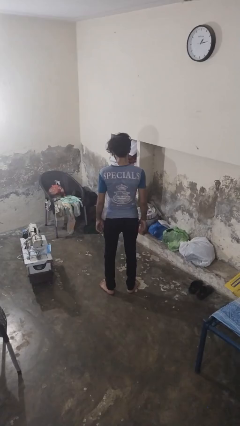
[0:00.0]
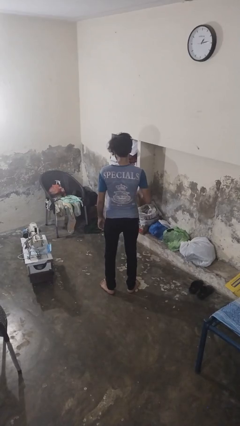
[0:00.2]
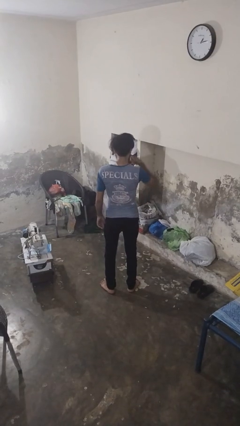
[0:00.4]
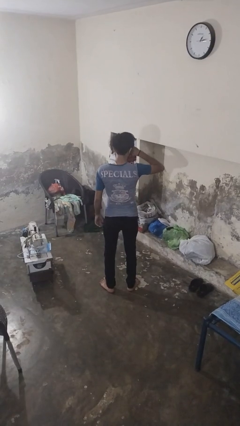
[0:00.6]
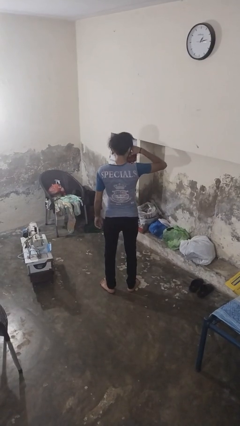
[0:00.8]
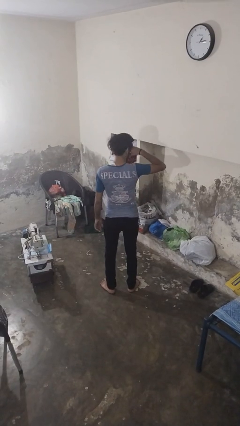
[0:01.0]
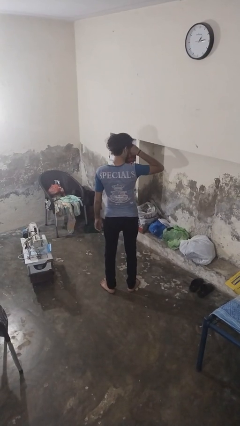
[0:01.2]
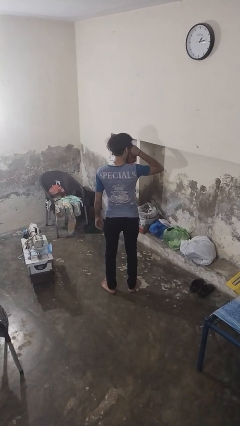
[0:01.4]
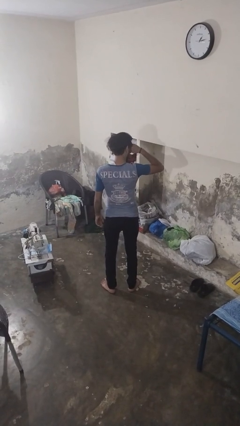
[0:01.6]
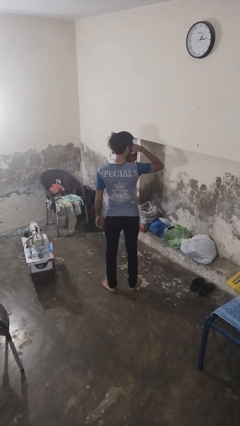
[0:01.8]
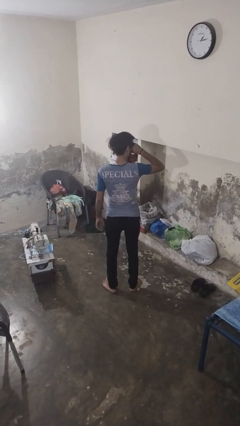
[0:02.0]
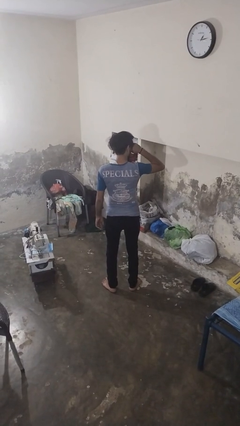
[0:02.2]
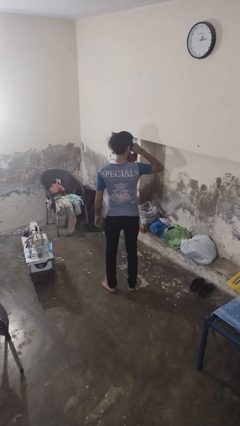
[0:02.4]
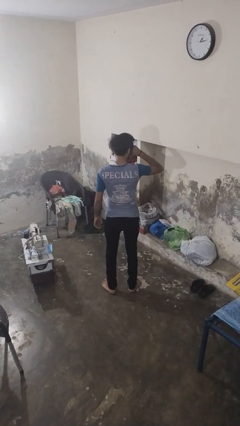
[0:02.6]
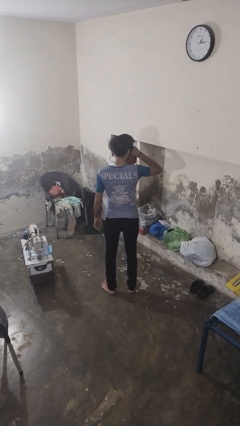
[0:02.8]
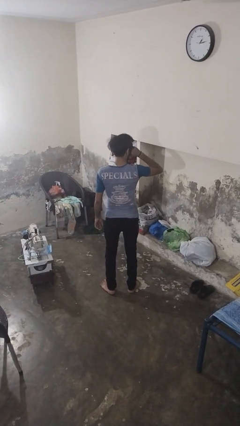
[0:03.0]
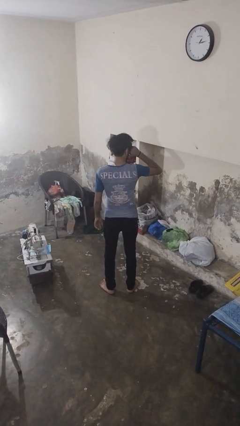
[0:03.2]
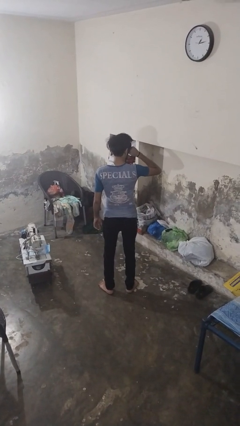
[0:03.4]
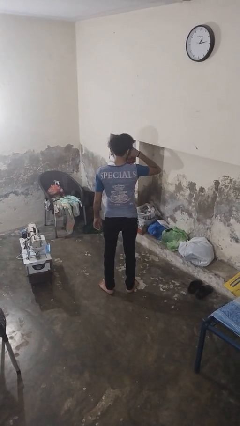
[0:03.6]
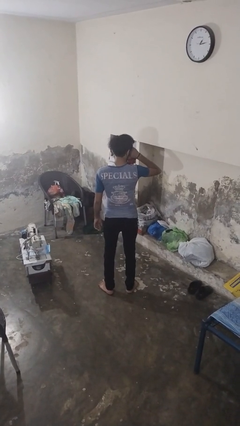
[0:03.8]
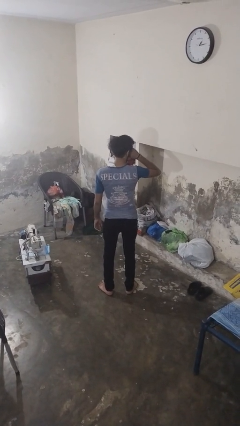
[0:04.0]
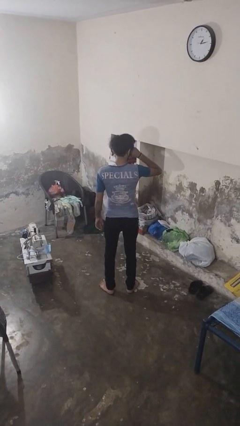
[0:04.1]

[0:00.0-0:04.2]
person rubs eyes

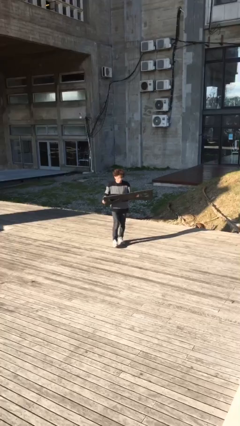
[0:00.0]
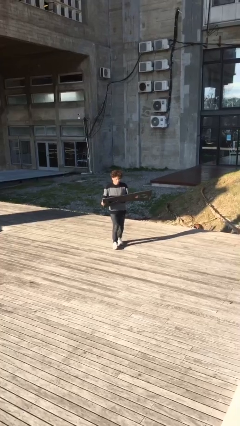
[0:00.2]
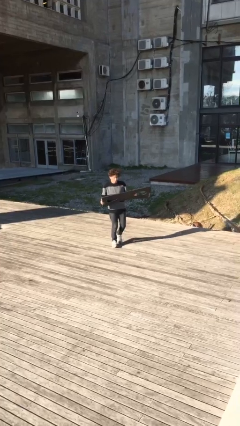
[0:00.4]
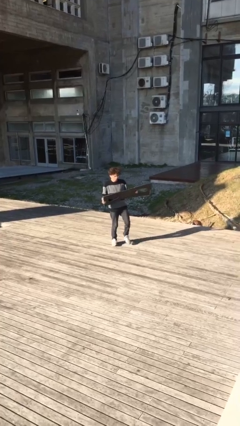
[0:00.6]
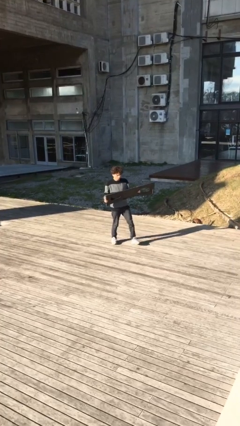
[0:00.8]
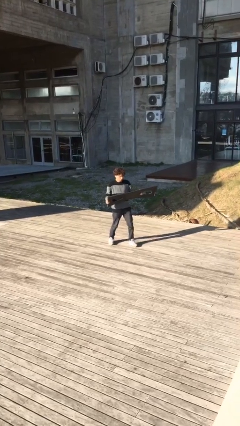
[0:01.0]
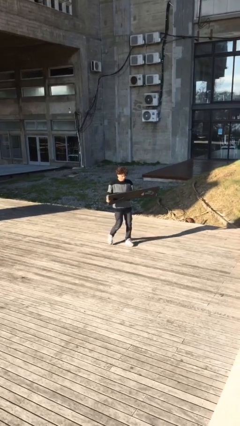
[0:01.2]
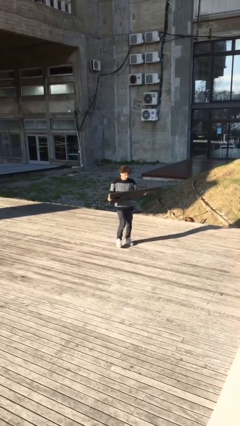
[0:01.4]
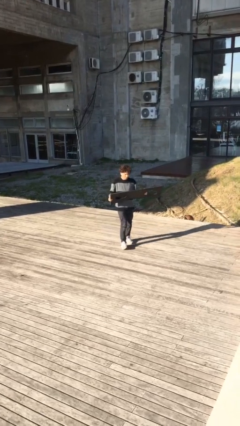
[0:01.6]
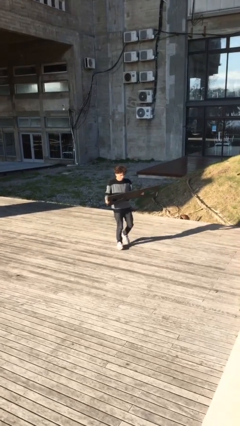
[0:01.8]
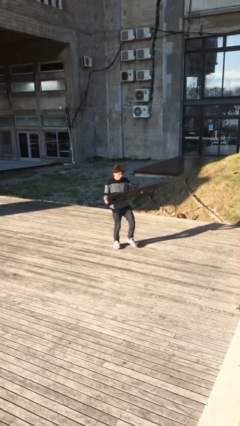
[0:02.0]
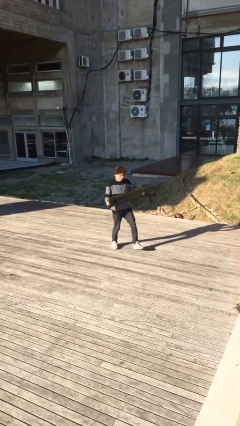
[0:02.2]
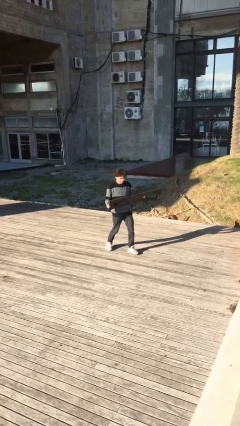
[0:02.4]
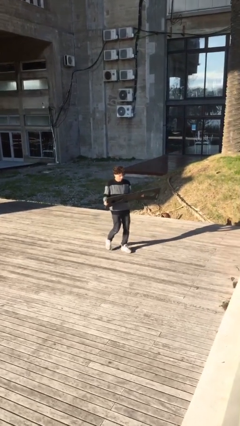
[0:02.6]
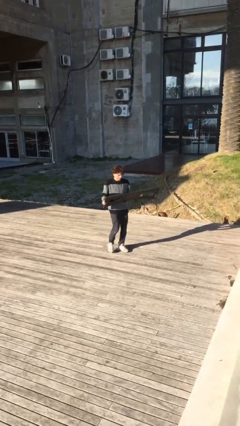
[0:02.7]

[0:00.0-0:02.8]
person carries heavy object

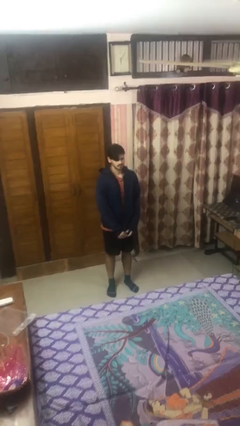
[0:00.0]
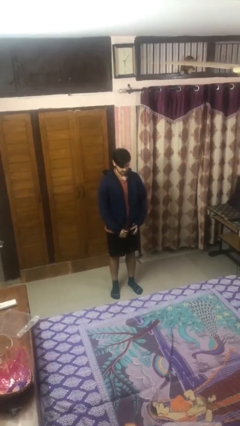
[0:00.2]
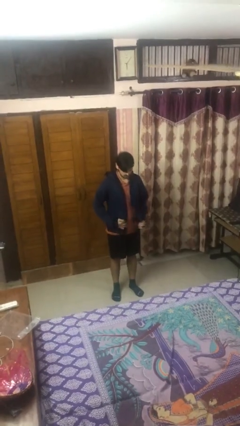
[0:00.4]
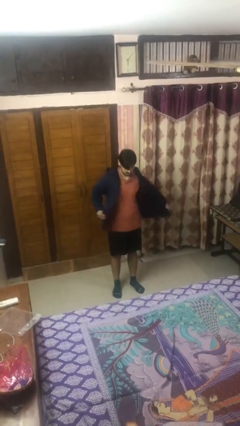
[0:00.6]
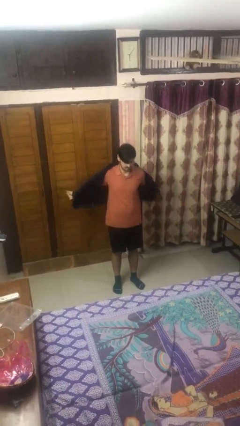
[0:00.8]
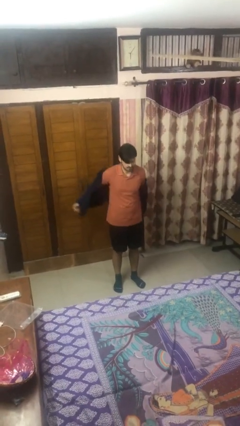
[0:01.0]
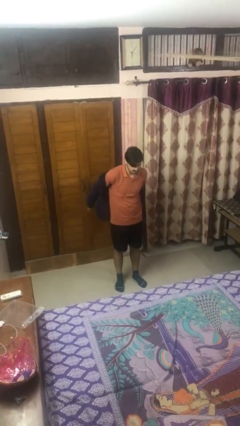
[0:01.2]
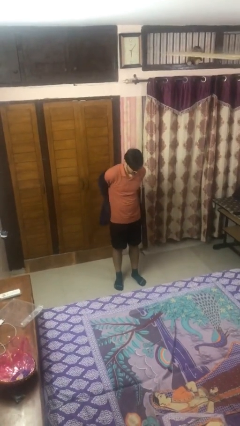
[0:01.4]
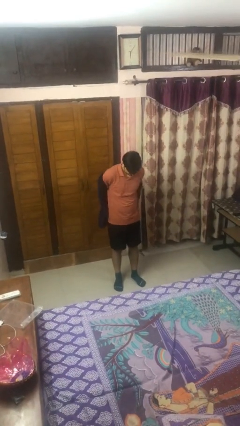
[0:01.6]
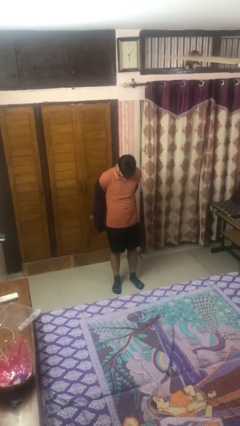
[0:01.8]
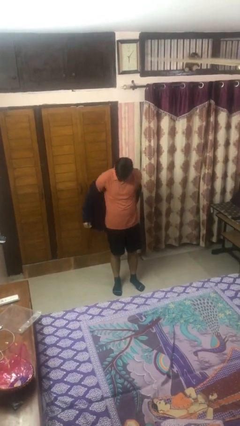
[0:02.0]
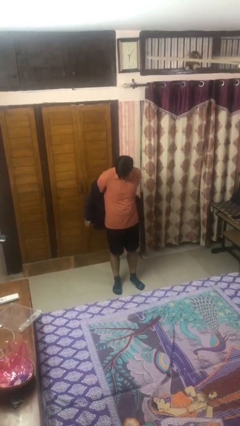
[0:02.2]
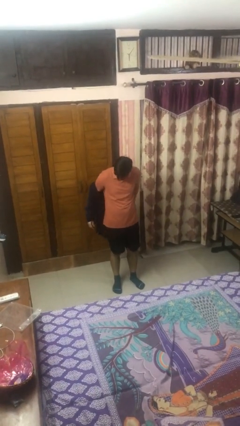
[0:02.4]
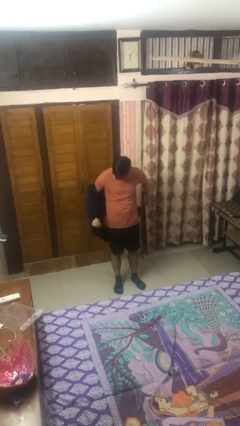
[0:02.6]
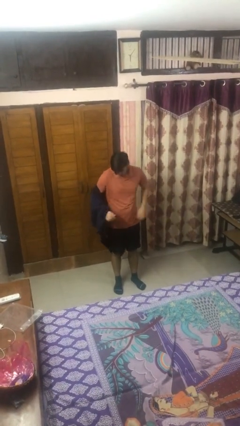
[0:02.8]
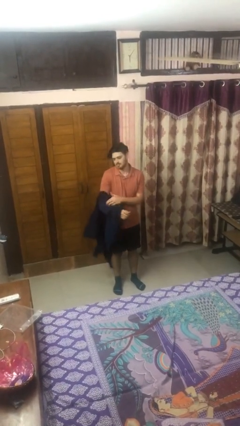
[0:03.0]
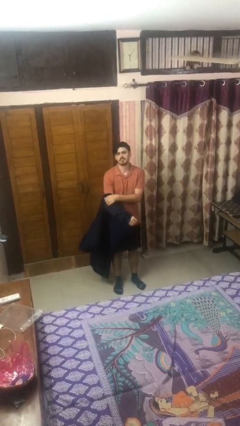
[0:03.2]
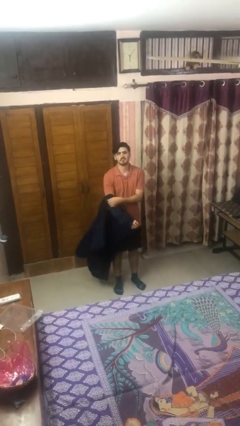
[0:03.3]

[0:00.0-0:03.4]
person takes off jacket

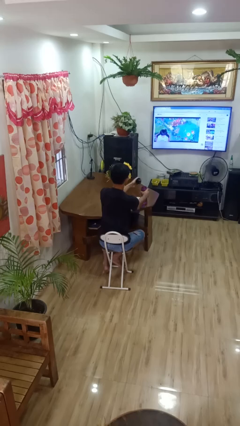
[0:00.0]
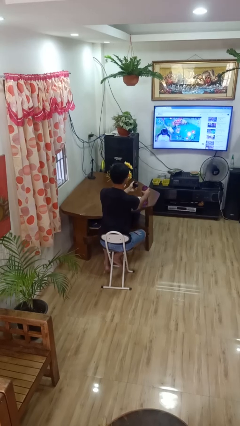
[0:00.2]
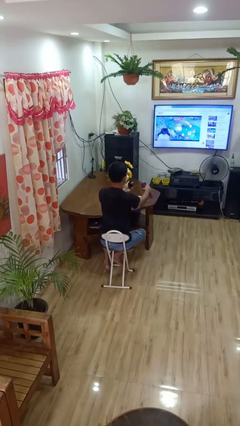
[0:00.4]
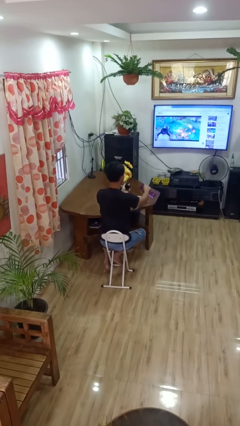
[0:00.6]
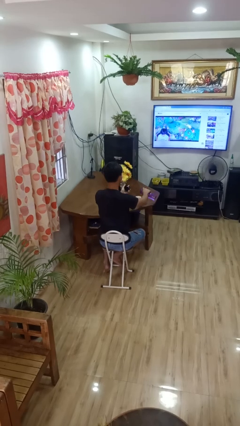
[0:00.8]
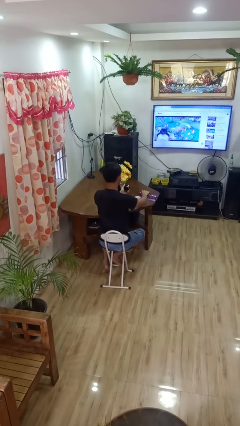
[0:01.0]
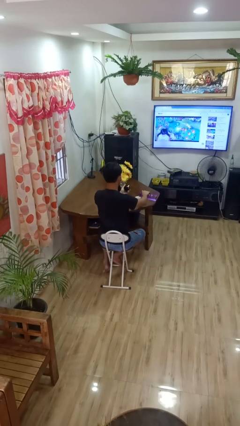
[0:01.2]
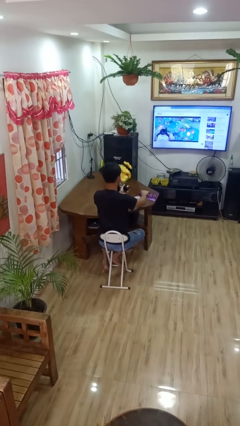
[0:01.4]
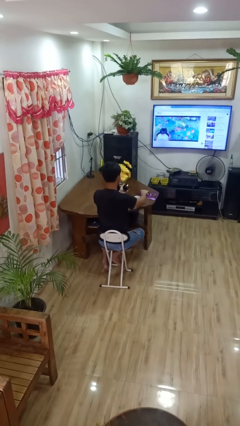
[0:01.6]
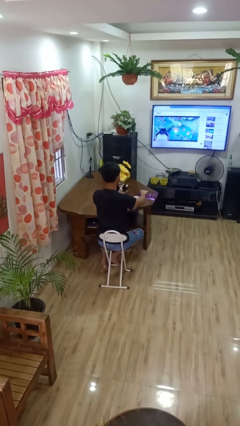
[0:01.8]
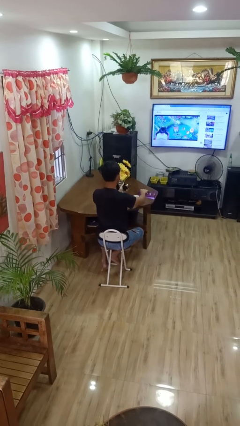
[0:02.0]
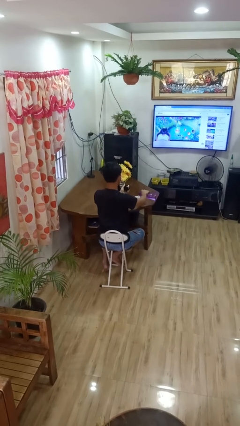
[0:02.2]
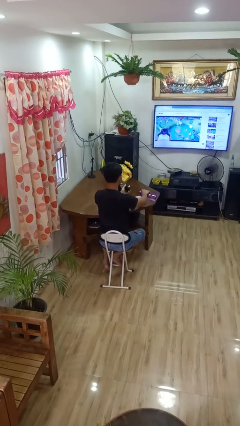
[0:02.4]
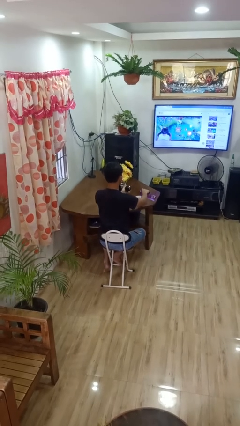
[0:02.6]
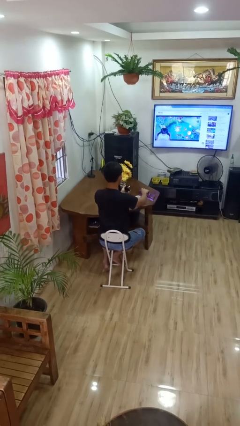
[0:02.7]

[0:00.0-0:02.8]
person pours liquid into cup

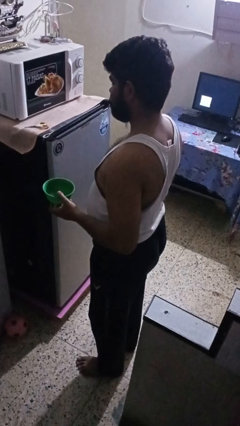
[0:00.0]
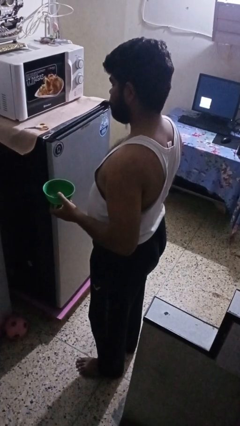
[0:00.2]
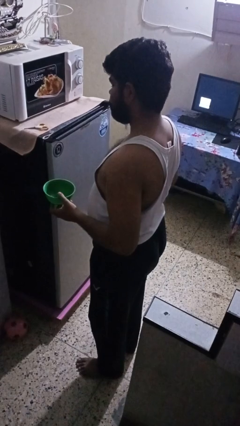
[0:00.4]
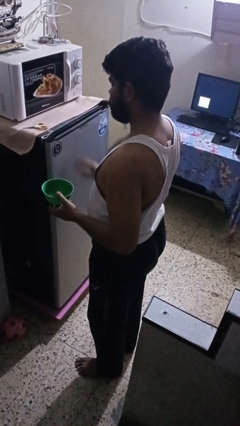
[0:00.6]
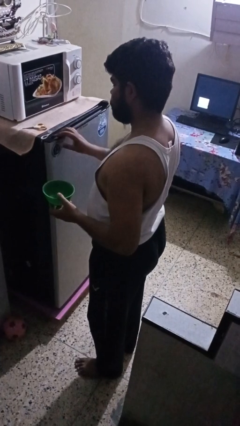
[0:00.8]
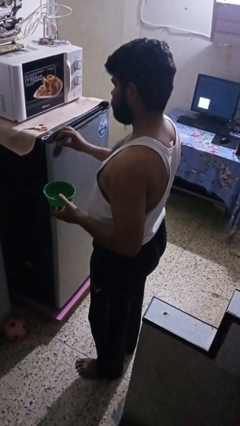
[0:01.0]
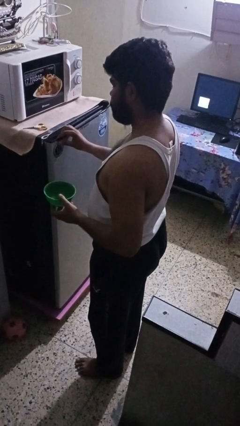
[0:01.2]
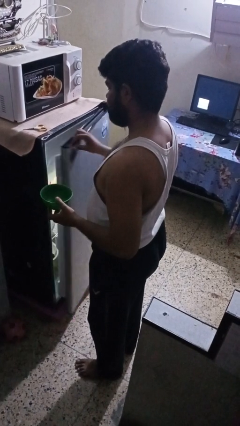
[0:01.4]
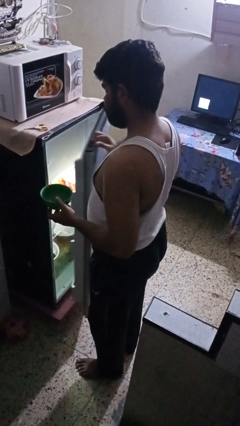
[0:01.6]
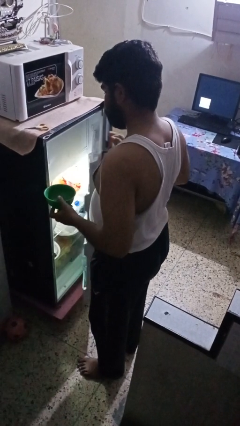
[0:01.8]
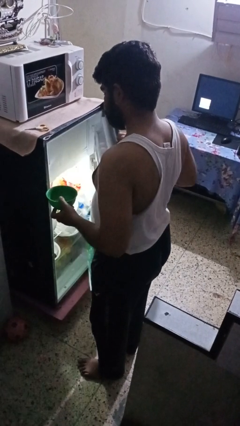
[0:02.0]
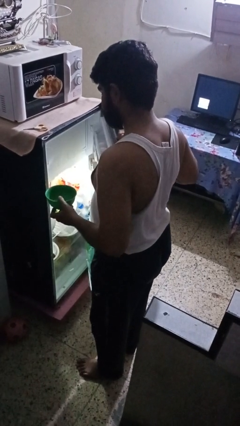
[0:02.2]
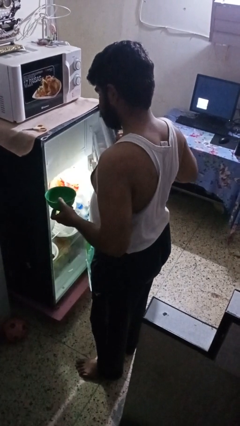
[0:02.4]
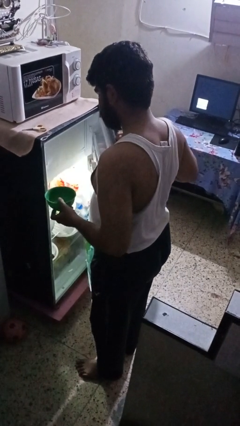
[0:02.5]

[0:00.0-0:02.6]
person opens refrigerator

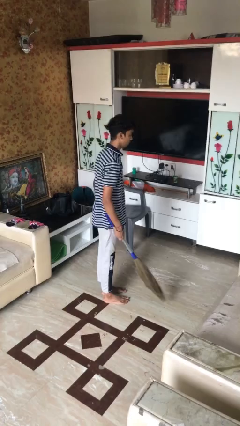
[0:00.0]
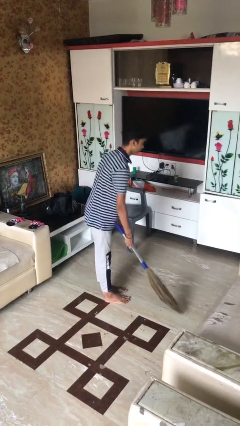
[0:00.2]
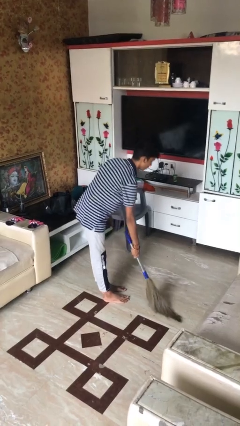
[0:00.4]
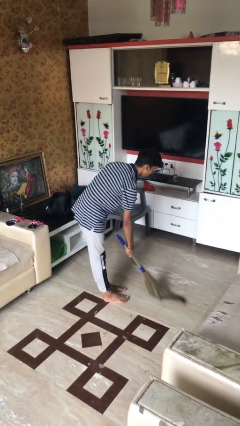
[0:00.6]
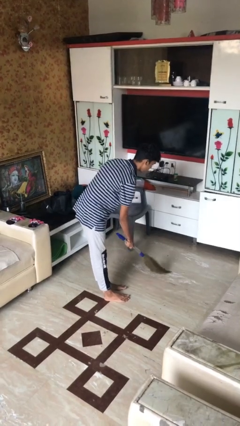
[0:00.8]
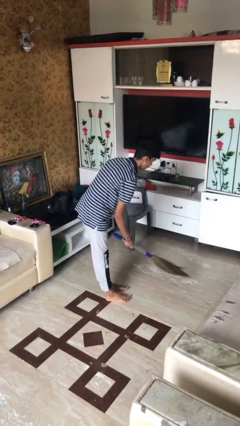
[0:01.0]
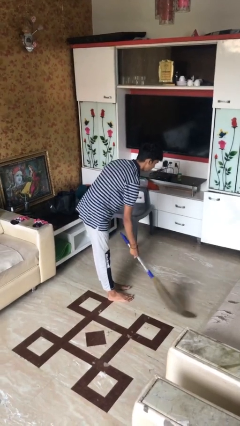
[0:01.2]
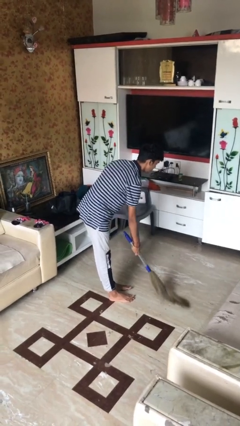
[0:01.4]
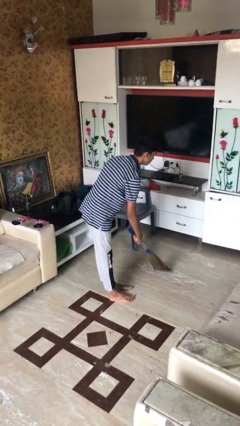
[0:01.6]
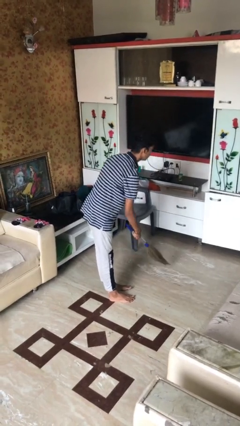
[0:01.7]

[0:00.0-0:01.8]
person sweeps floor
